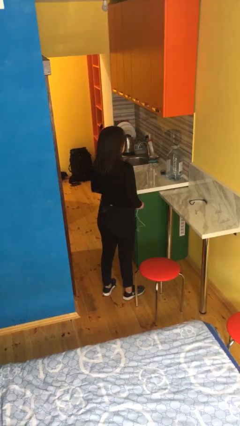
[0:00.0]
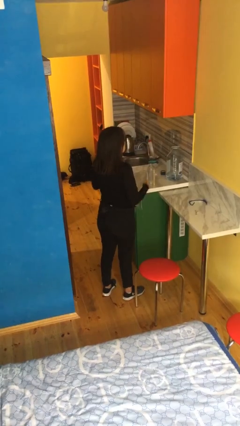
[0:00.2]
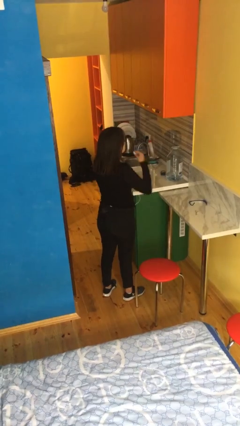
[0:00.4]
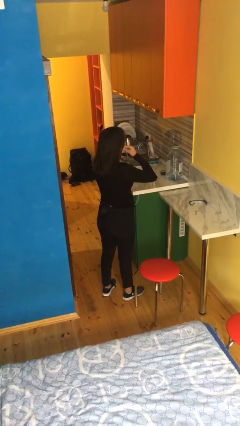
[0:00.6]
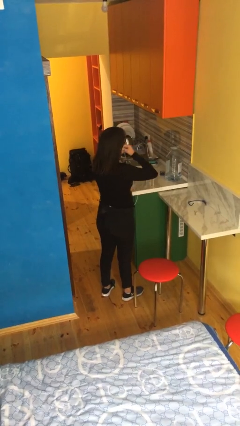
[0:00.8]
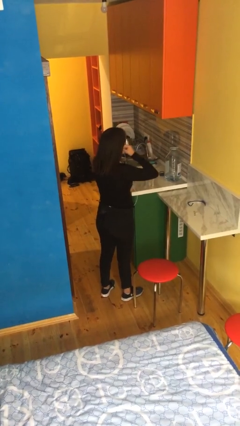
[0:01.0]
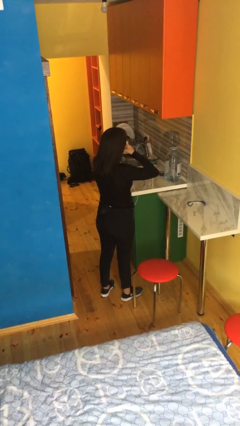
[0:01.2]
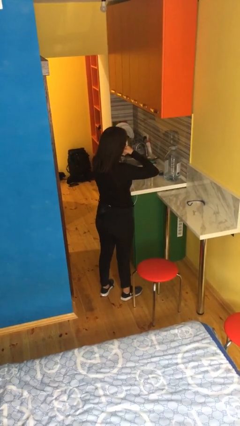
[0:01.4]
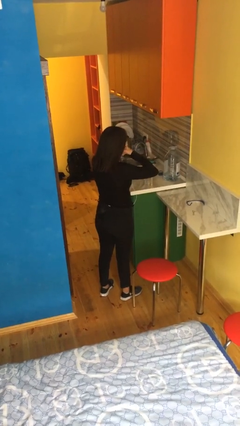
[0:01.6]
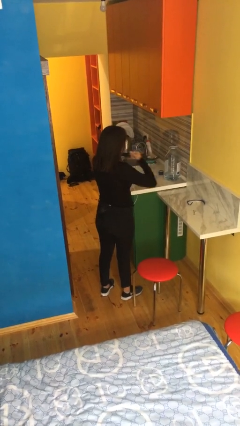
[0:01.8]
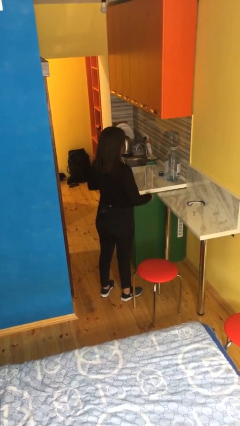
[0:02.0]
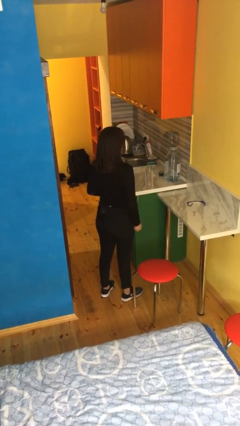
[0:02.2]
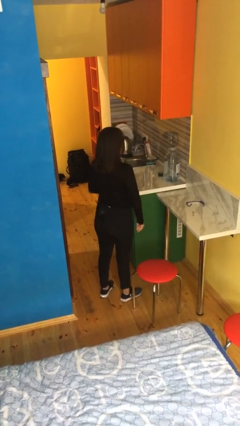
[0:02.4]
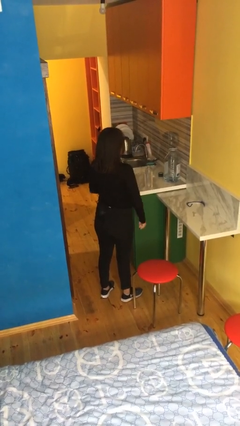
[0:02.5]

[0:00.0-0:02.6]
person puts on headphones

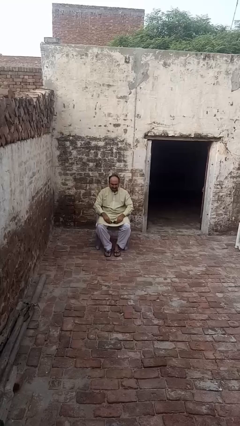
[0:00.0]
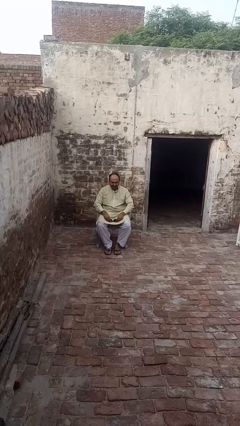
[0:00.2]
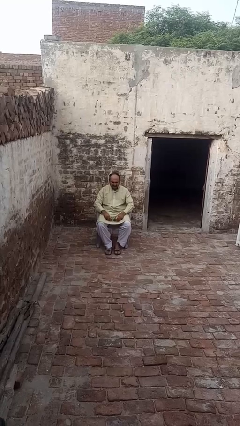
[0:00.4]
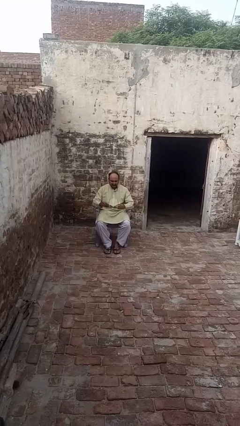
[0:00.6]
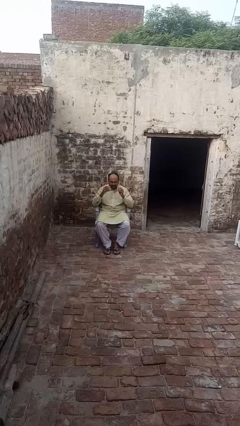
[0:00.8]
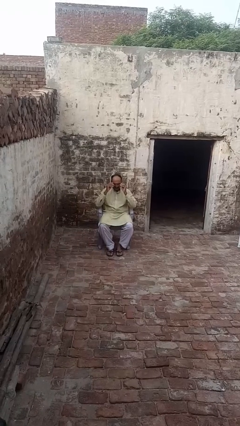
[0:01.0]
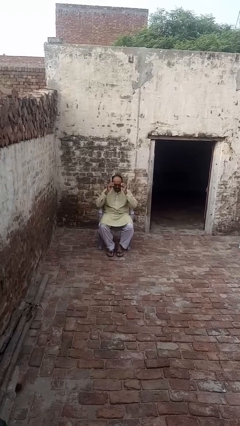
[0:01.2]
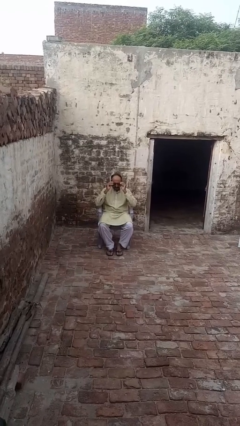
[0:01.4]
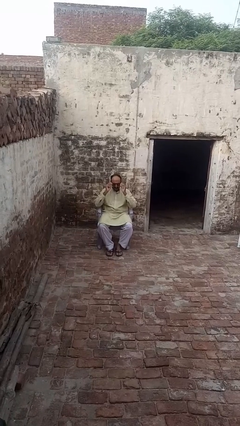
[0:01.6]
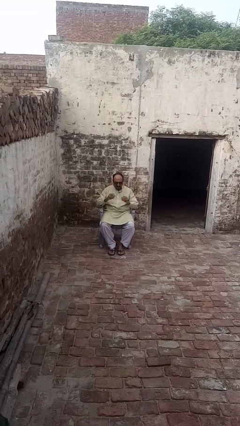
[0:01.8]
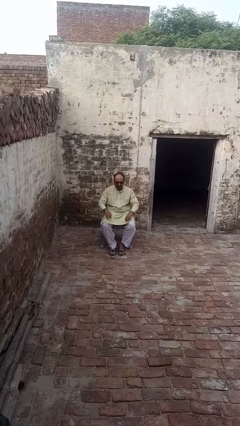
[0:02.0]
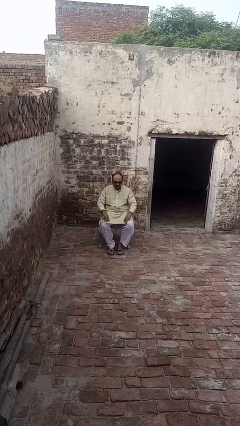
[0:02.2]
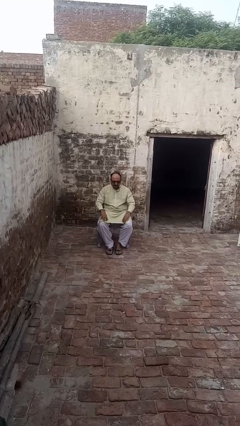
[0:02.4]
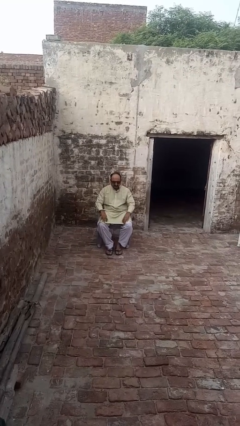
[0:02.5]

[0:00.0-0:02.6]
person puts on sunglasses

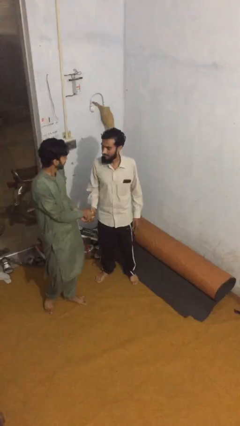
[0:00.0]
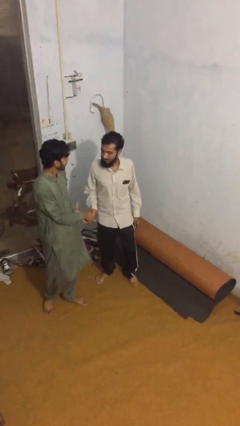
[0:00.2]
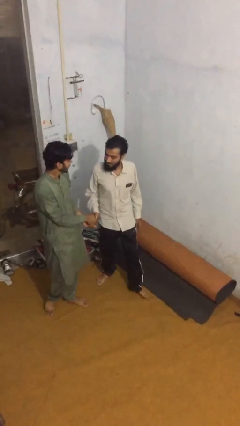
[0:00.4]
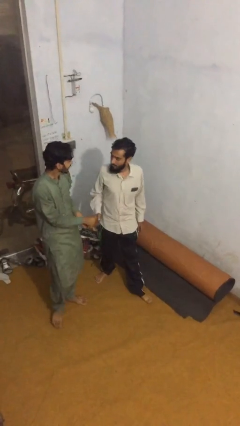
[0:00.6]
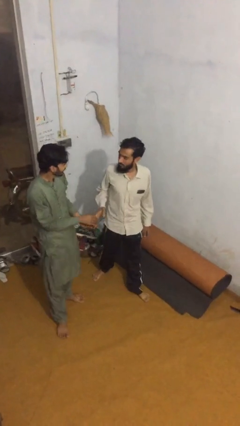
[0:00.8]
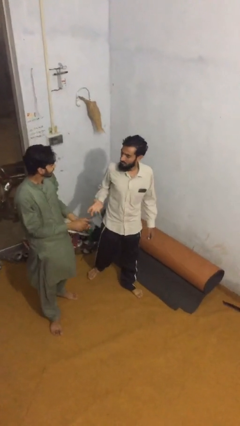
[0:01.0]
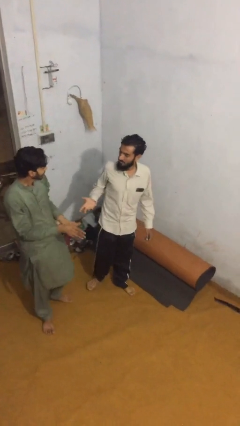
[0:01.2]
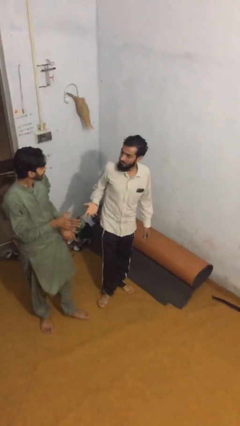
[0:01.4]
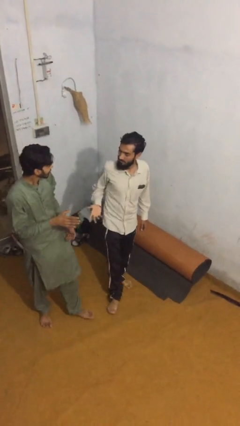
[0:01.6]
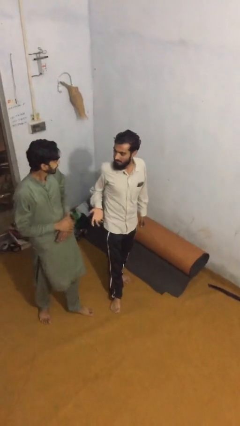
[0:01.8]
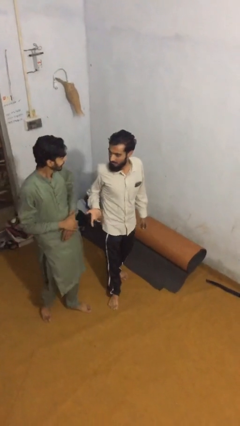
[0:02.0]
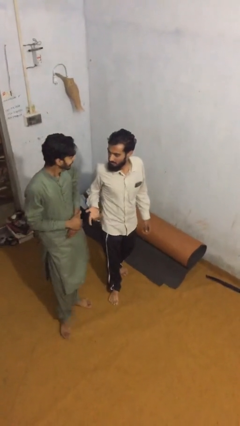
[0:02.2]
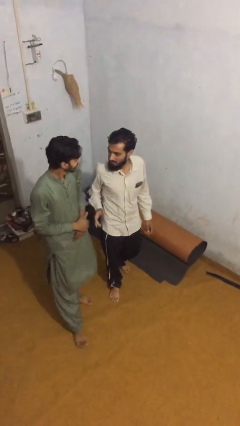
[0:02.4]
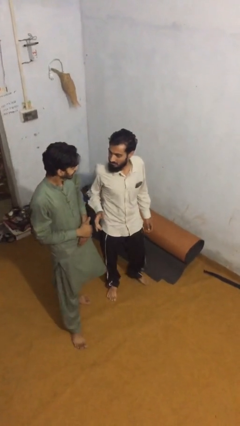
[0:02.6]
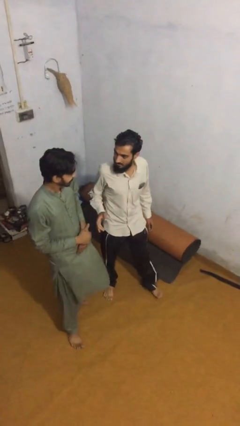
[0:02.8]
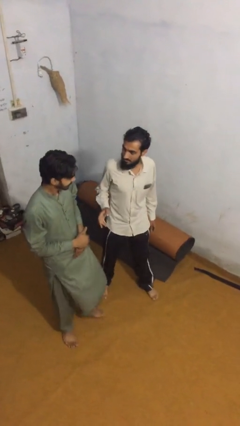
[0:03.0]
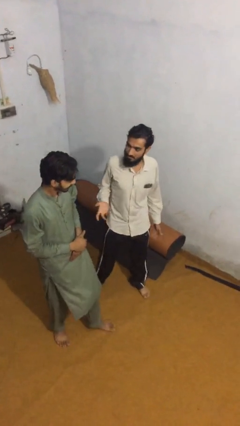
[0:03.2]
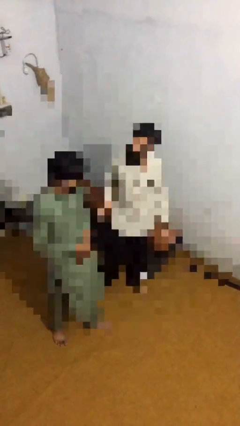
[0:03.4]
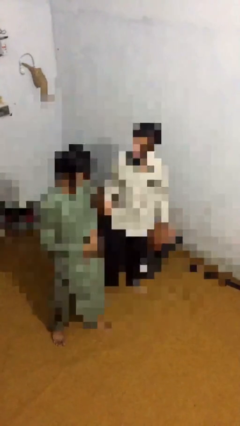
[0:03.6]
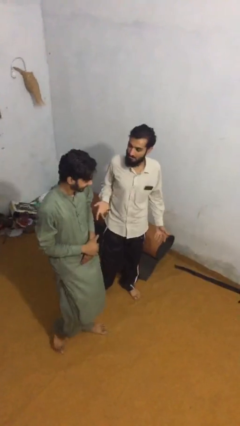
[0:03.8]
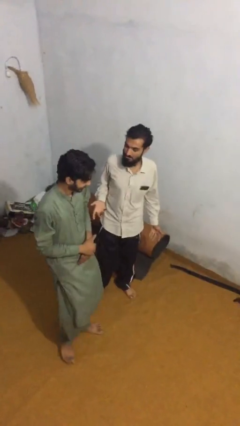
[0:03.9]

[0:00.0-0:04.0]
person talks to person

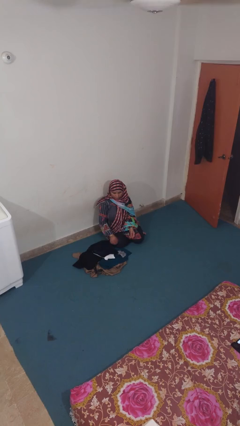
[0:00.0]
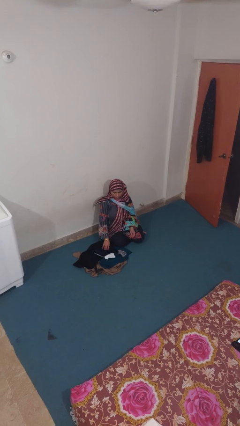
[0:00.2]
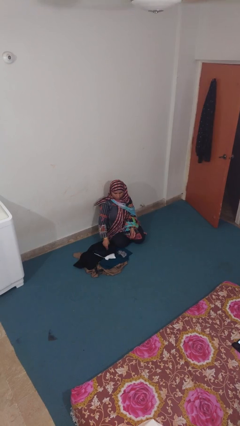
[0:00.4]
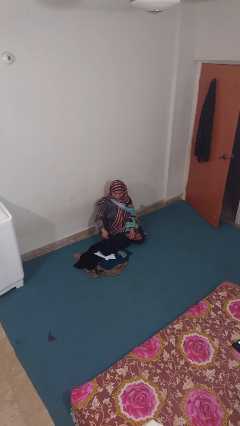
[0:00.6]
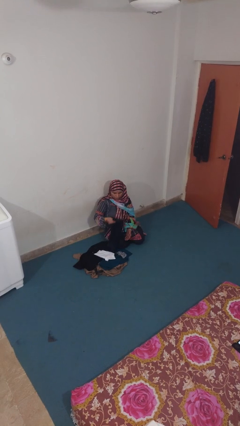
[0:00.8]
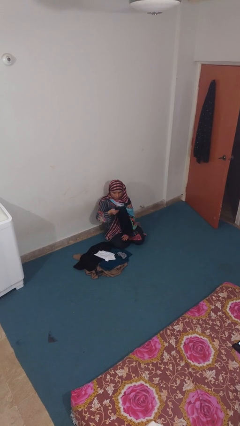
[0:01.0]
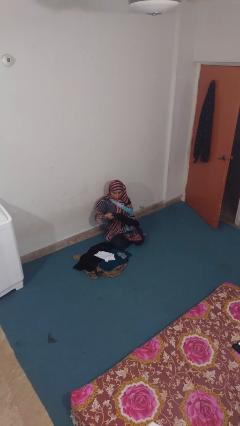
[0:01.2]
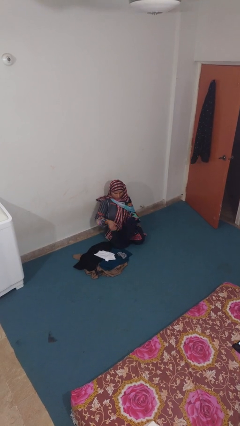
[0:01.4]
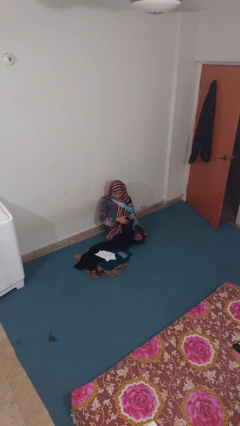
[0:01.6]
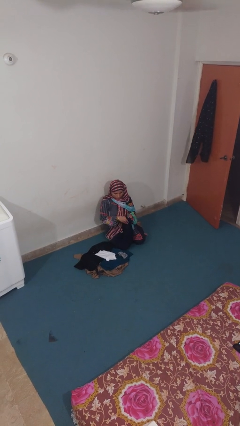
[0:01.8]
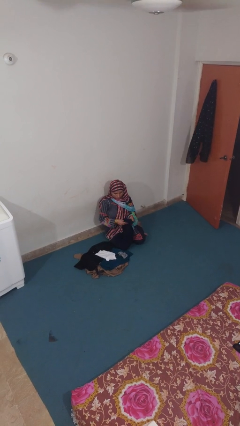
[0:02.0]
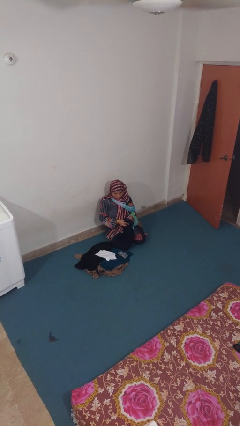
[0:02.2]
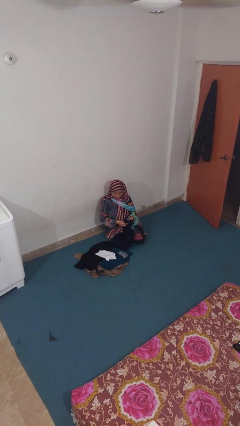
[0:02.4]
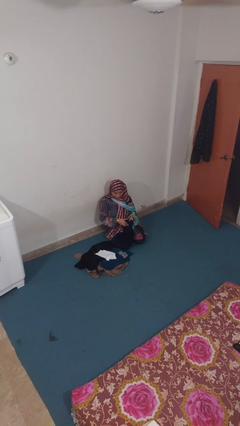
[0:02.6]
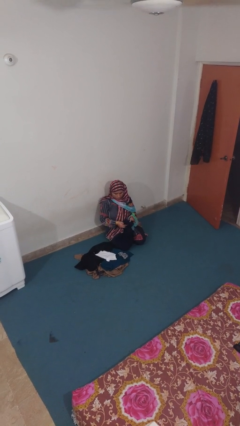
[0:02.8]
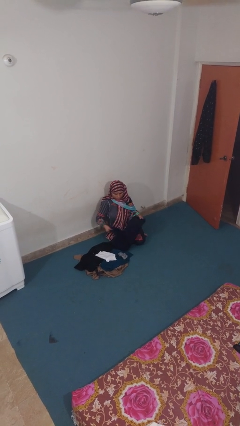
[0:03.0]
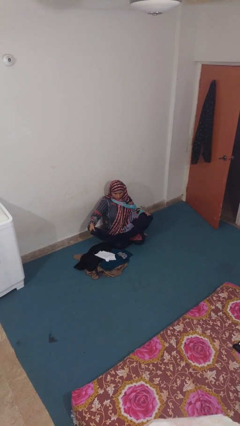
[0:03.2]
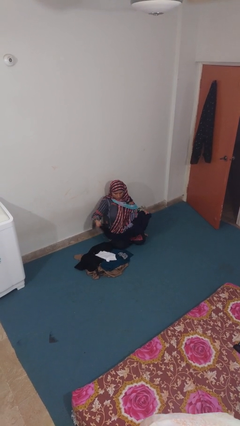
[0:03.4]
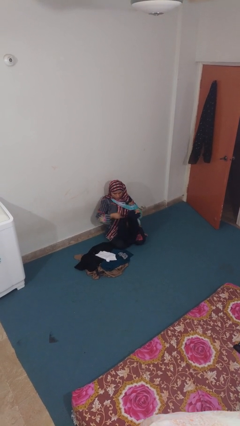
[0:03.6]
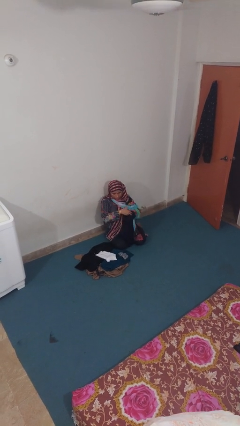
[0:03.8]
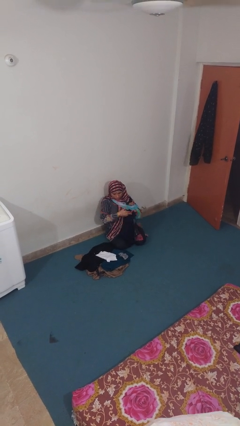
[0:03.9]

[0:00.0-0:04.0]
person folds pants

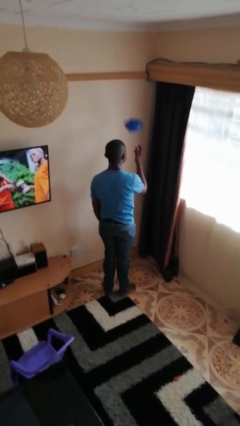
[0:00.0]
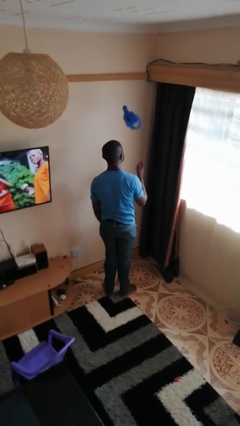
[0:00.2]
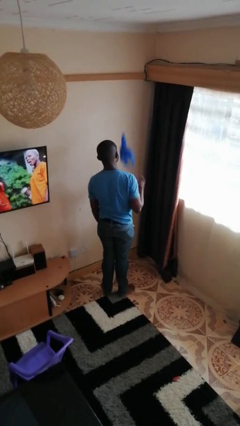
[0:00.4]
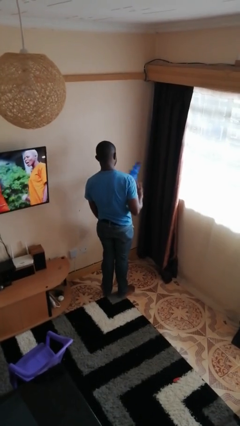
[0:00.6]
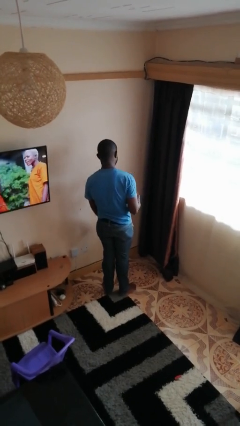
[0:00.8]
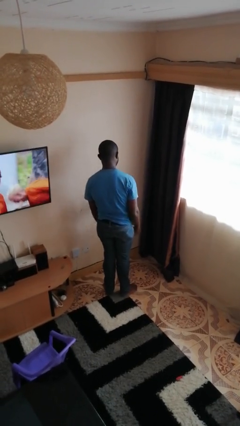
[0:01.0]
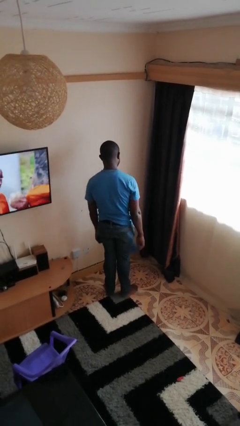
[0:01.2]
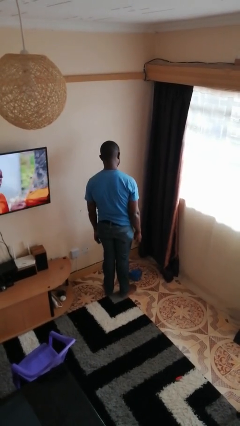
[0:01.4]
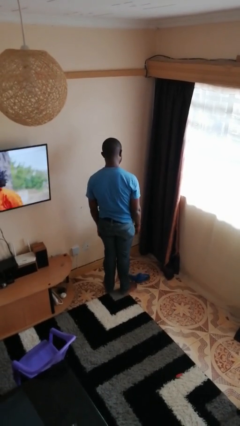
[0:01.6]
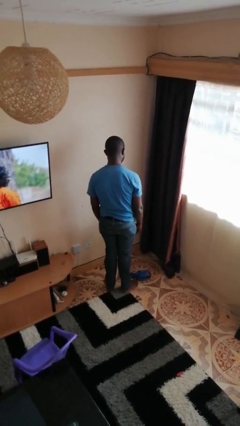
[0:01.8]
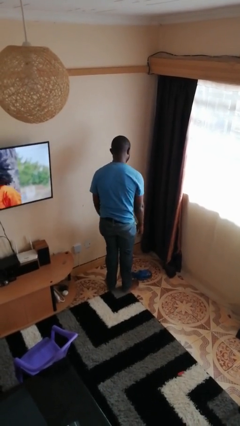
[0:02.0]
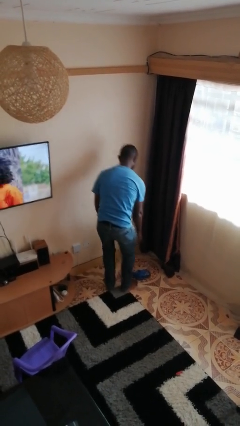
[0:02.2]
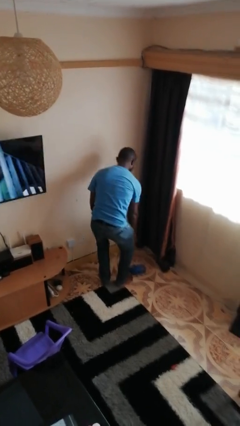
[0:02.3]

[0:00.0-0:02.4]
person throws object into air

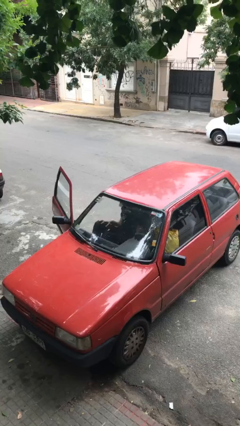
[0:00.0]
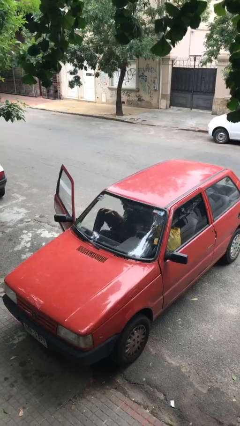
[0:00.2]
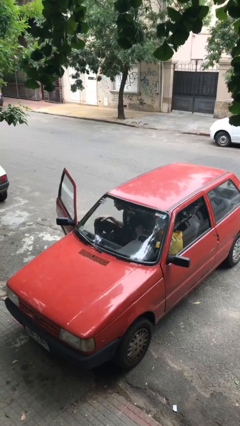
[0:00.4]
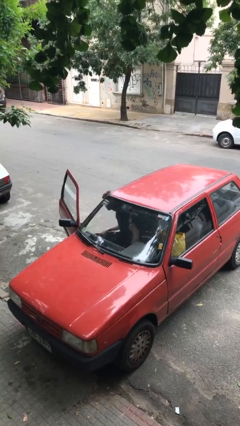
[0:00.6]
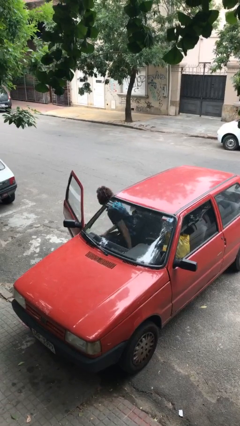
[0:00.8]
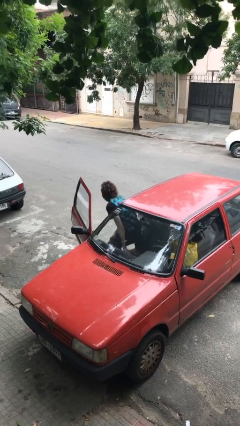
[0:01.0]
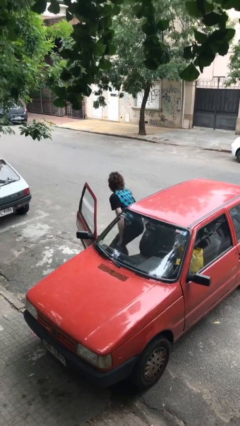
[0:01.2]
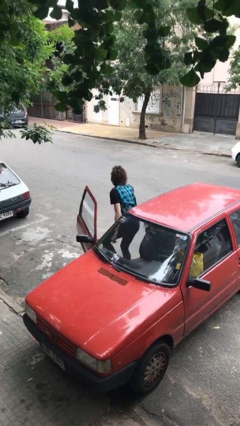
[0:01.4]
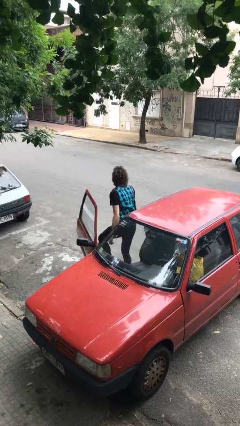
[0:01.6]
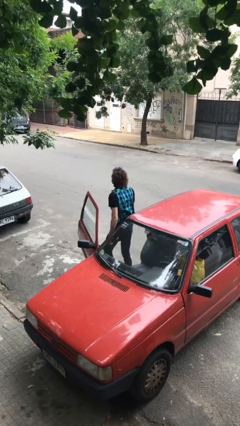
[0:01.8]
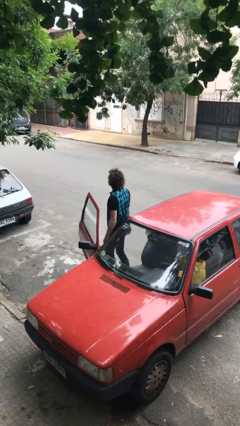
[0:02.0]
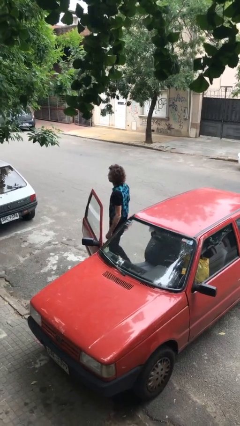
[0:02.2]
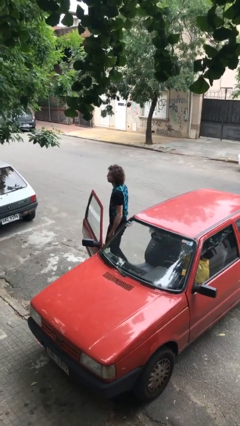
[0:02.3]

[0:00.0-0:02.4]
person exits car
